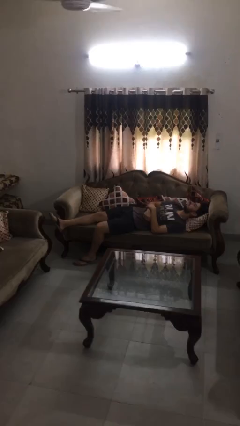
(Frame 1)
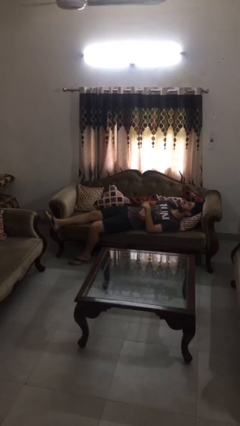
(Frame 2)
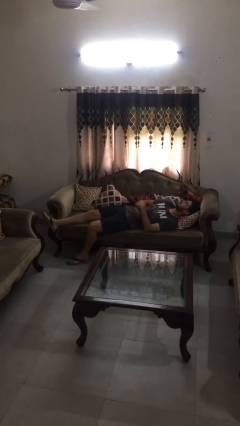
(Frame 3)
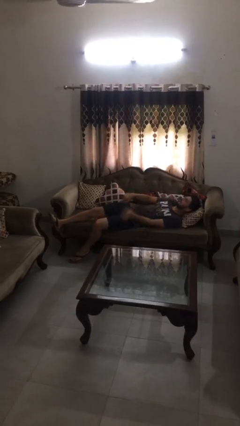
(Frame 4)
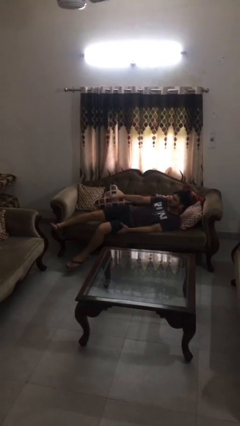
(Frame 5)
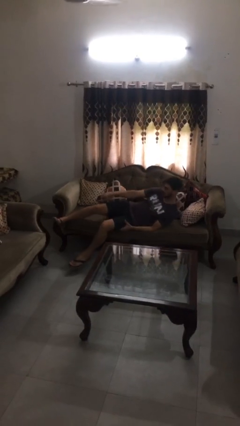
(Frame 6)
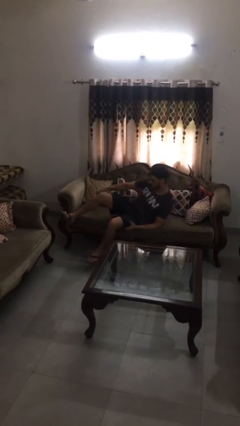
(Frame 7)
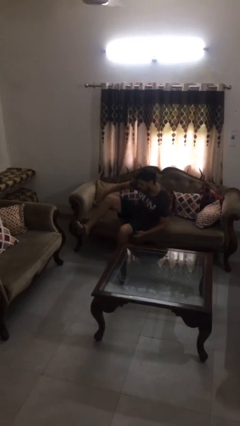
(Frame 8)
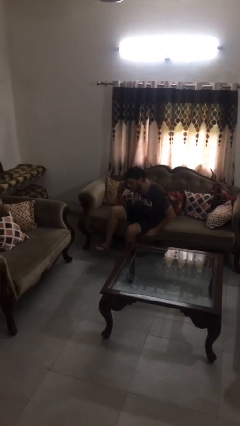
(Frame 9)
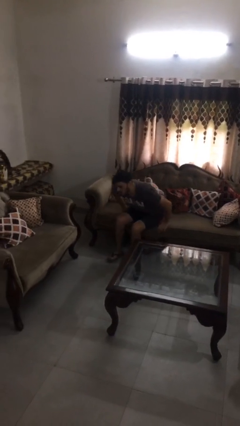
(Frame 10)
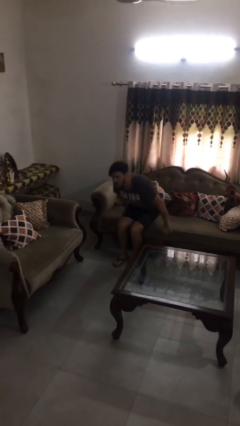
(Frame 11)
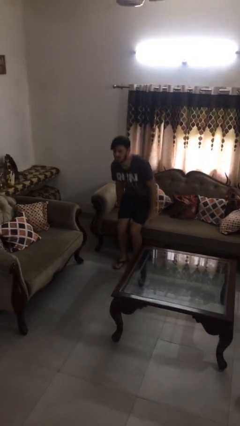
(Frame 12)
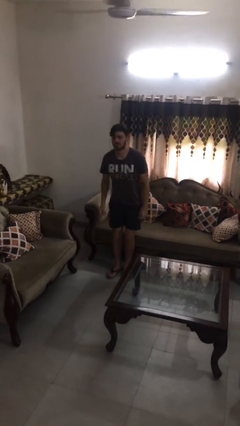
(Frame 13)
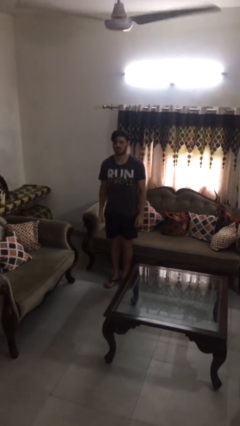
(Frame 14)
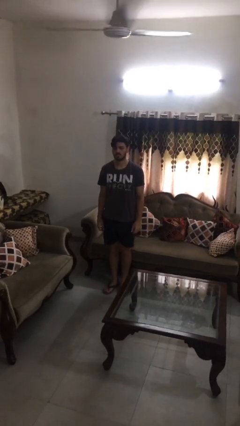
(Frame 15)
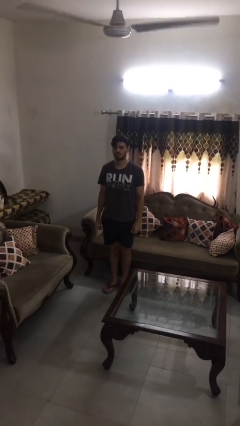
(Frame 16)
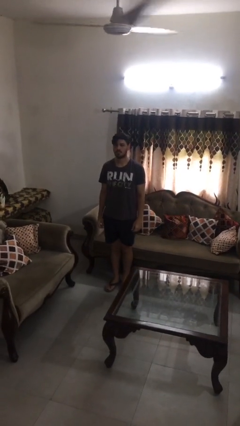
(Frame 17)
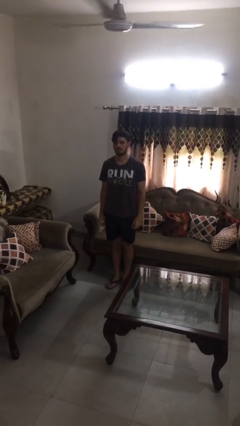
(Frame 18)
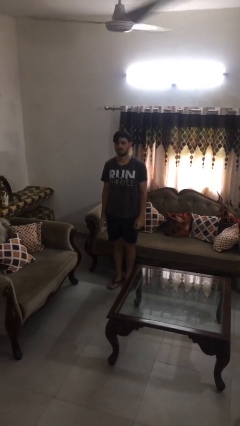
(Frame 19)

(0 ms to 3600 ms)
person stands up

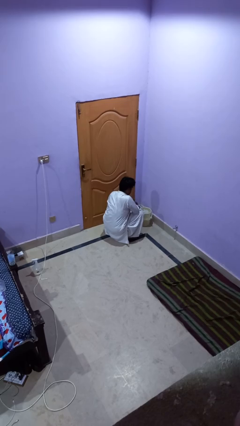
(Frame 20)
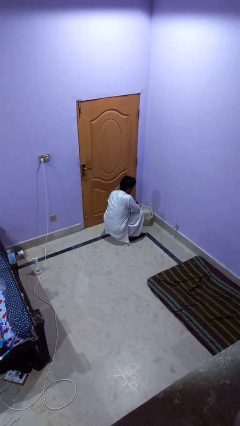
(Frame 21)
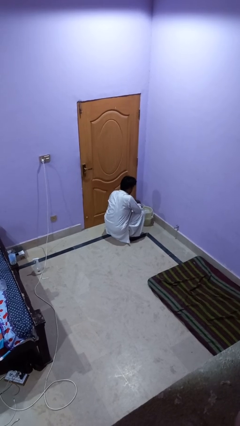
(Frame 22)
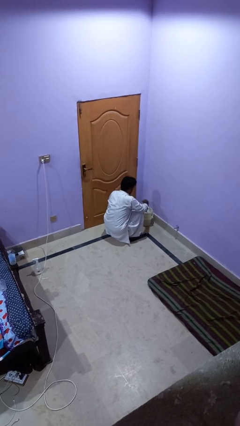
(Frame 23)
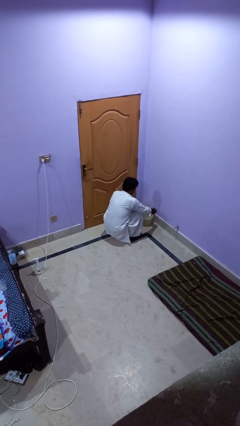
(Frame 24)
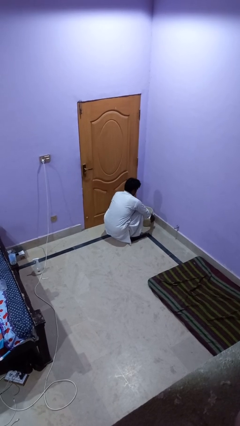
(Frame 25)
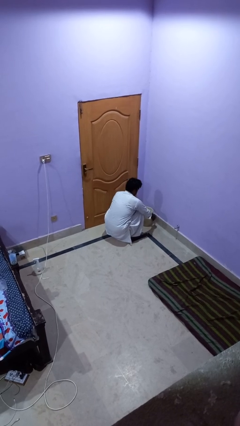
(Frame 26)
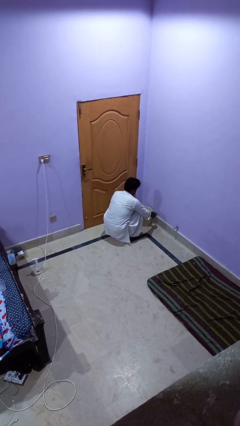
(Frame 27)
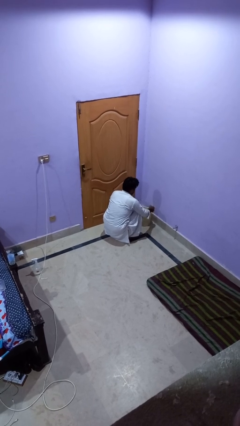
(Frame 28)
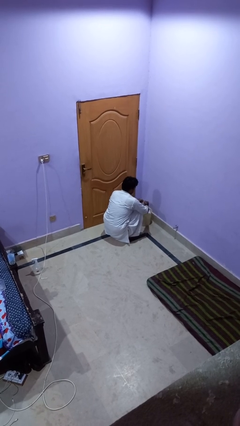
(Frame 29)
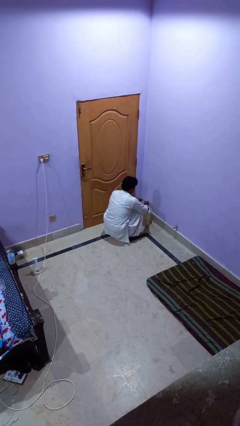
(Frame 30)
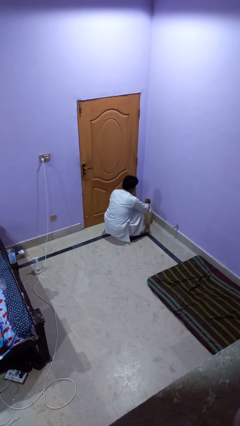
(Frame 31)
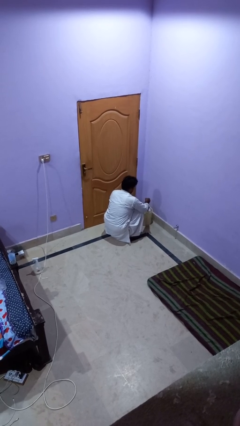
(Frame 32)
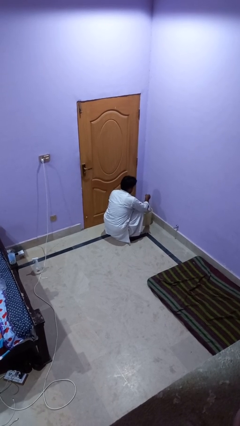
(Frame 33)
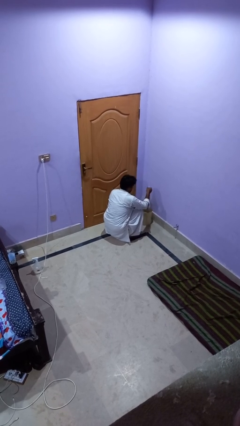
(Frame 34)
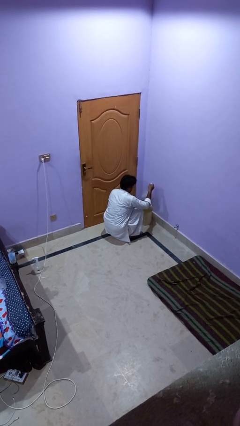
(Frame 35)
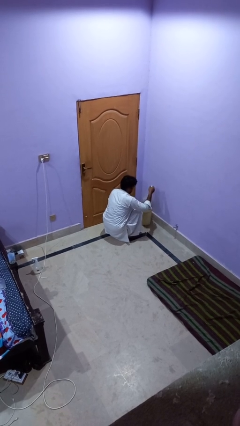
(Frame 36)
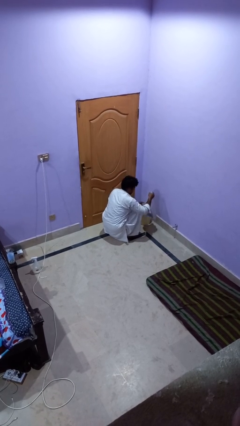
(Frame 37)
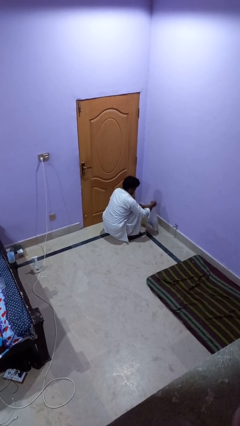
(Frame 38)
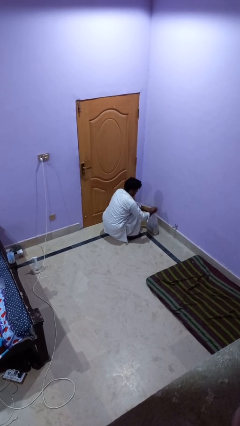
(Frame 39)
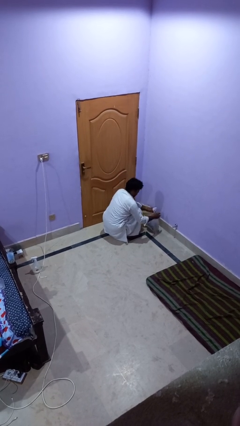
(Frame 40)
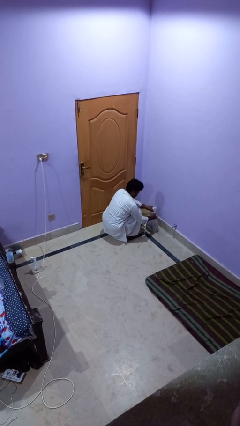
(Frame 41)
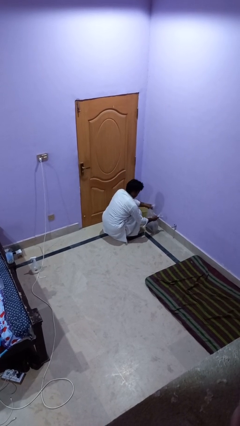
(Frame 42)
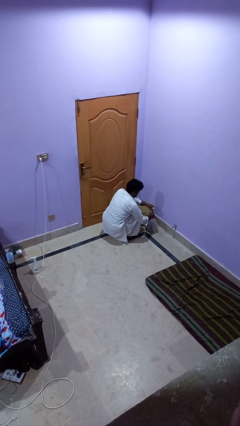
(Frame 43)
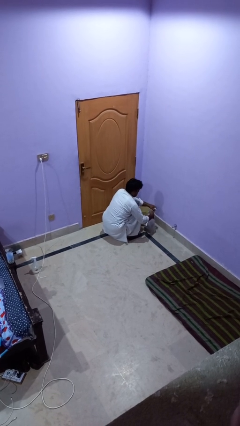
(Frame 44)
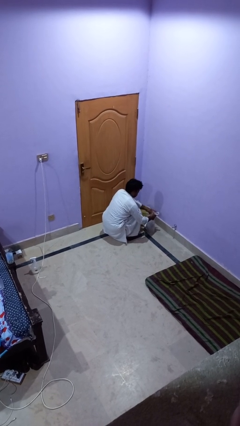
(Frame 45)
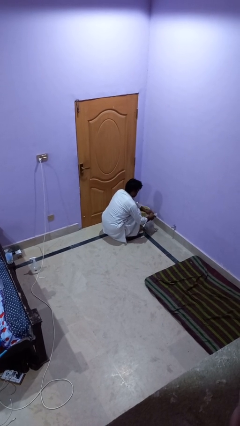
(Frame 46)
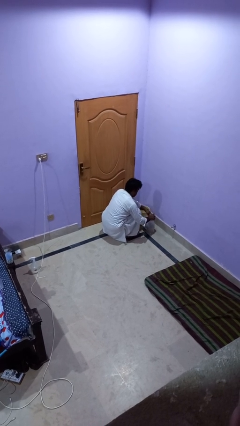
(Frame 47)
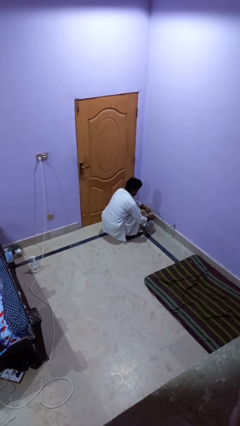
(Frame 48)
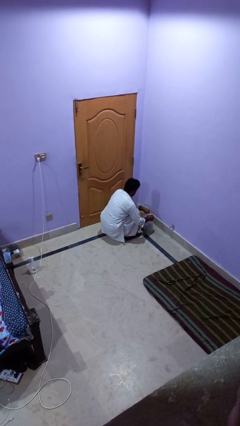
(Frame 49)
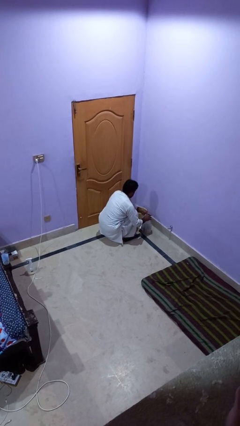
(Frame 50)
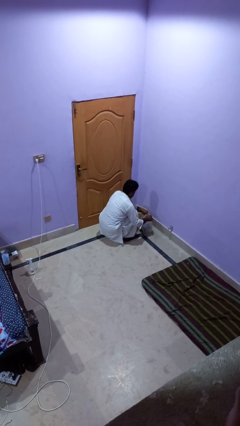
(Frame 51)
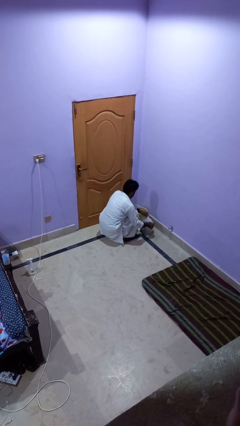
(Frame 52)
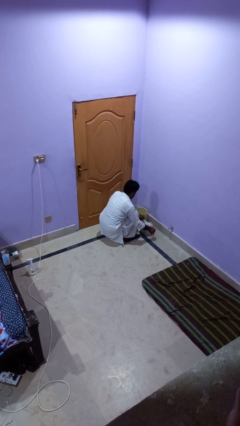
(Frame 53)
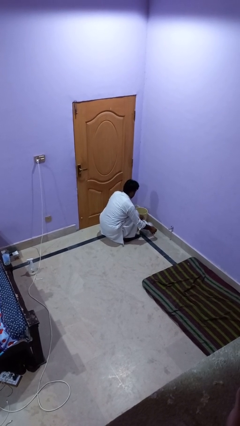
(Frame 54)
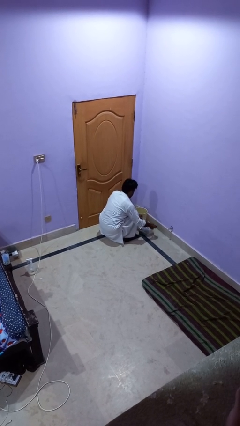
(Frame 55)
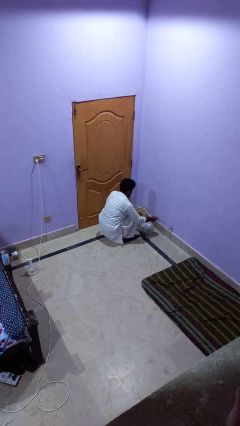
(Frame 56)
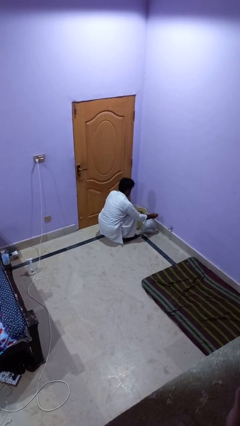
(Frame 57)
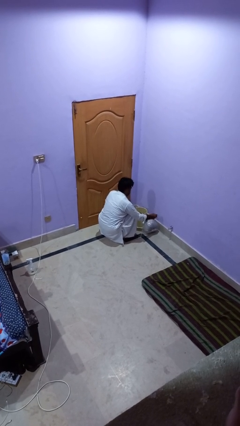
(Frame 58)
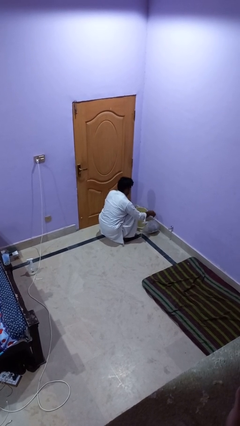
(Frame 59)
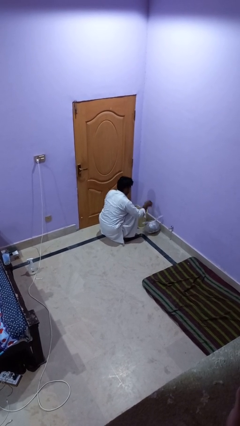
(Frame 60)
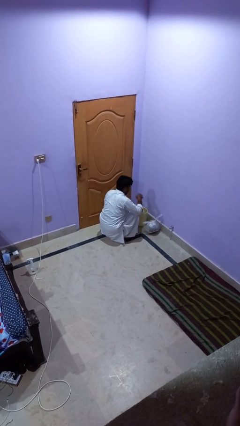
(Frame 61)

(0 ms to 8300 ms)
person removes trashbag from trashcan

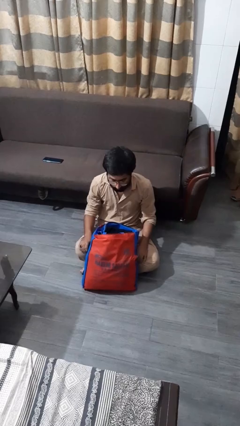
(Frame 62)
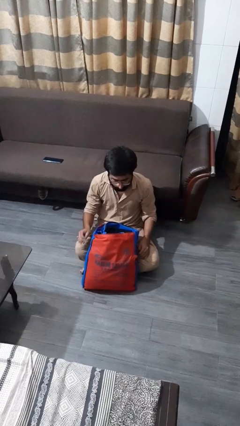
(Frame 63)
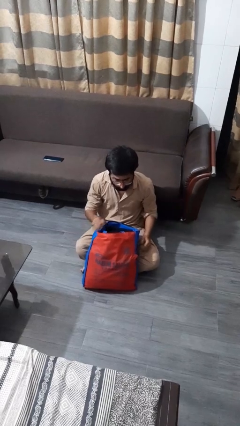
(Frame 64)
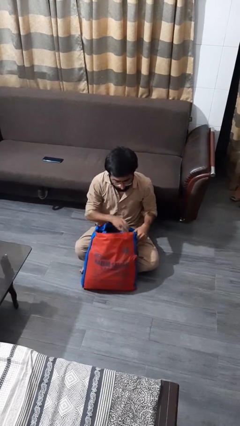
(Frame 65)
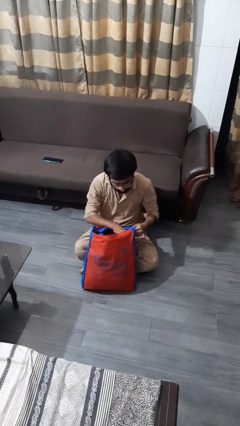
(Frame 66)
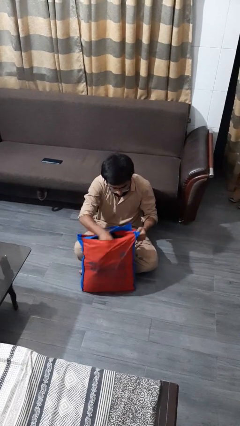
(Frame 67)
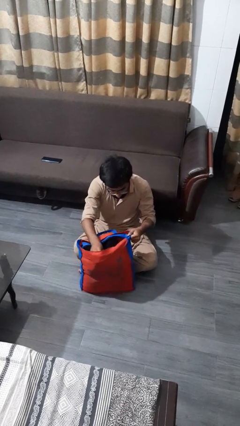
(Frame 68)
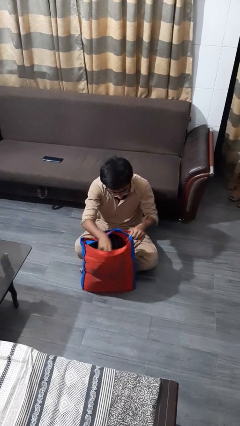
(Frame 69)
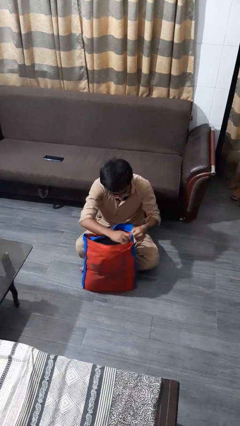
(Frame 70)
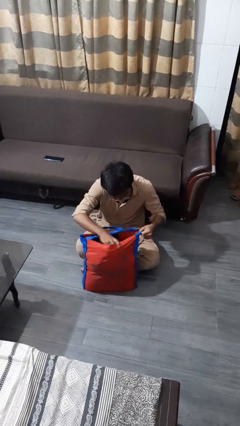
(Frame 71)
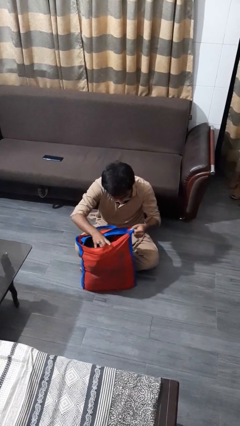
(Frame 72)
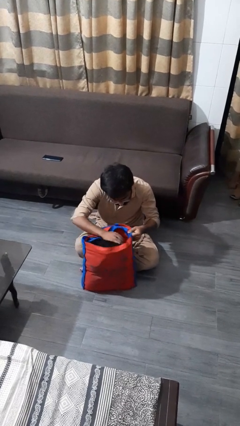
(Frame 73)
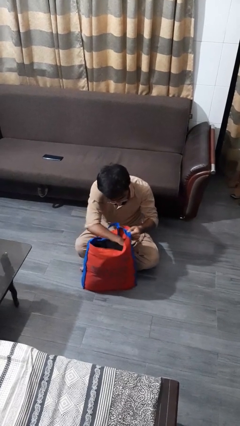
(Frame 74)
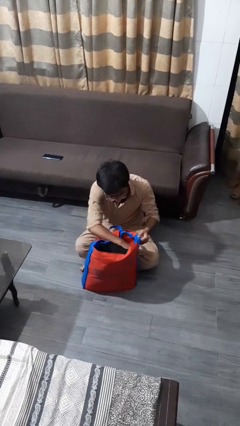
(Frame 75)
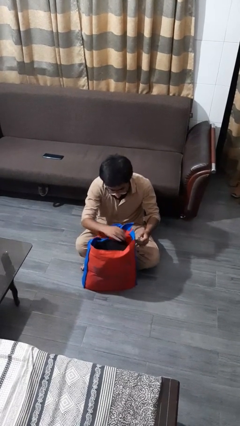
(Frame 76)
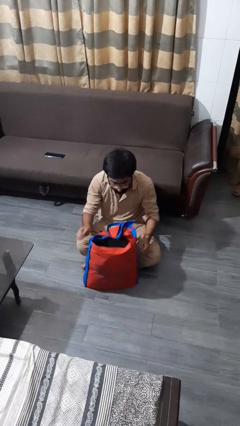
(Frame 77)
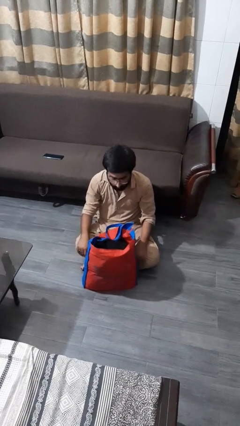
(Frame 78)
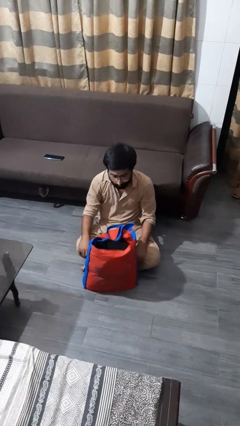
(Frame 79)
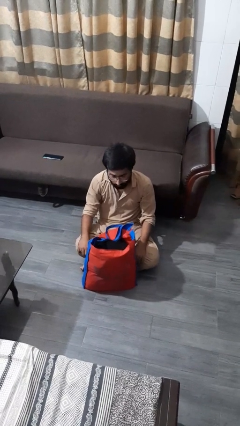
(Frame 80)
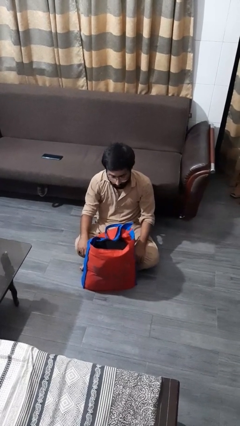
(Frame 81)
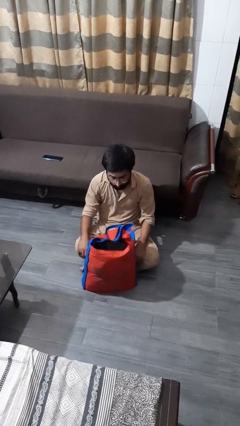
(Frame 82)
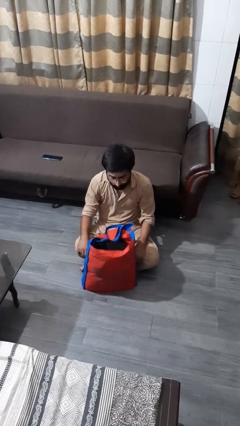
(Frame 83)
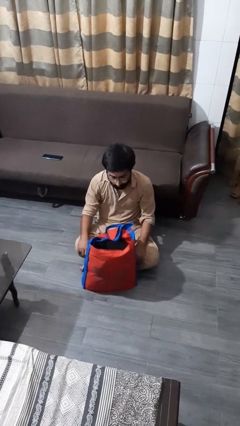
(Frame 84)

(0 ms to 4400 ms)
person searches in bag

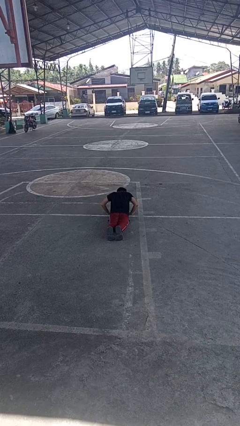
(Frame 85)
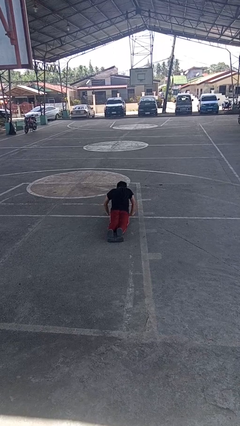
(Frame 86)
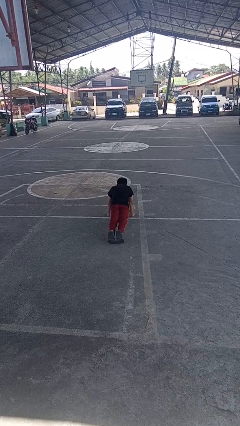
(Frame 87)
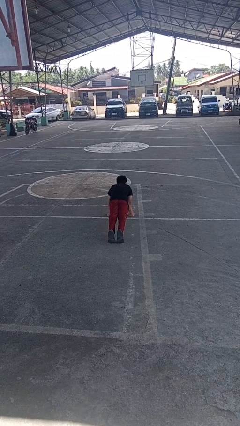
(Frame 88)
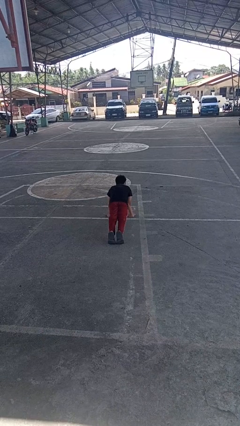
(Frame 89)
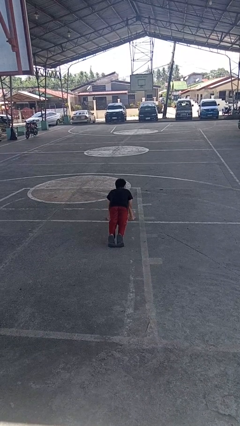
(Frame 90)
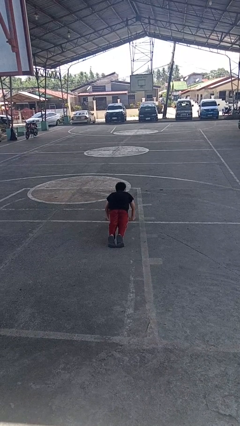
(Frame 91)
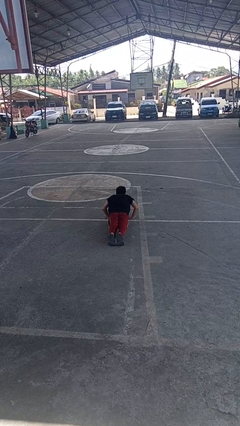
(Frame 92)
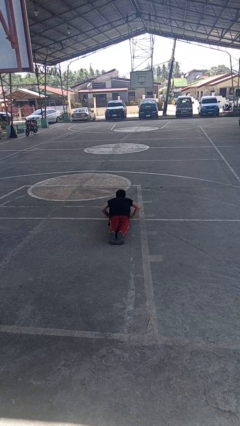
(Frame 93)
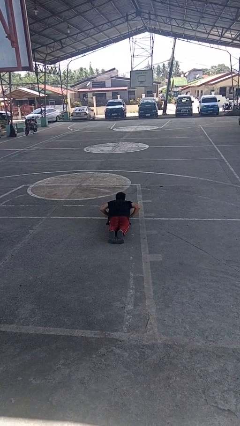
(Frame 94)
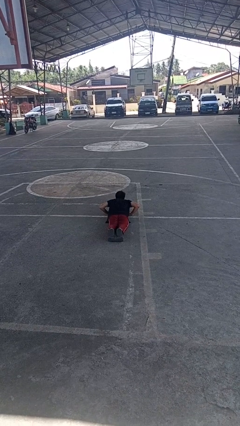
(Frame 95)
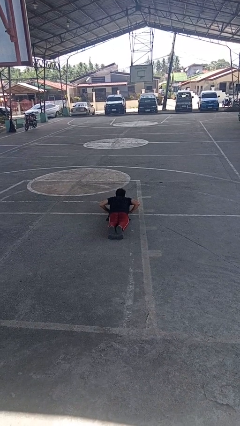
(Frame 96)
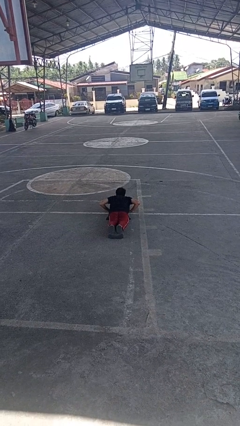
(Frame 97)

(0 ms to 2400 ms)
person exercises with pushup
